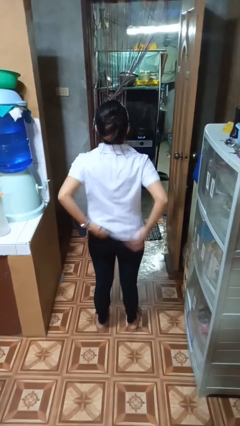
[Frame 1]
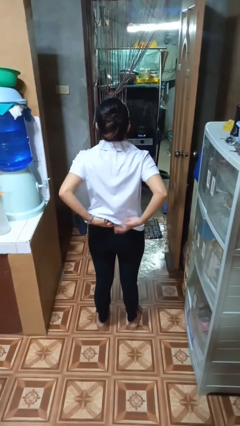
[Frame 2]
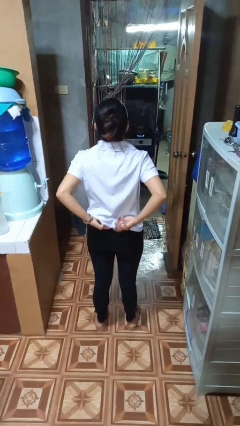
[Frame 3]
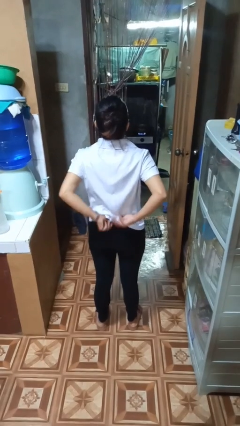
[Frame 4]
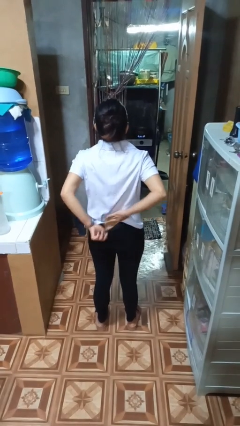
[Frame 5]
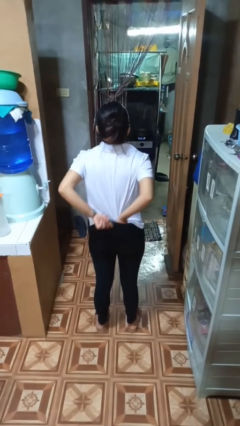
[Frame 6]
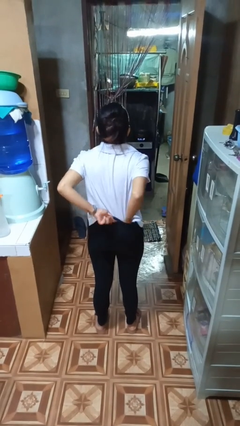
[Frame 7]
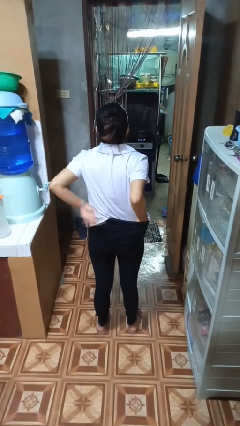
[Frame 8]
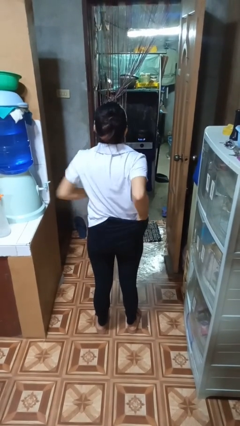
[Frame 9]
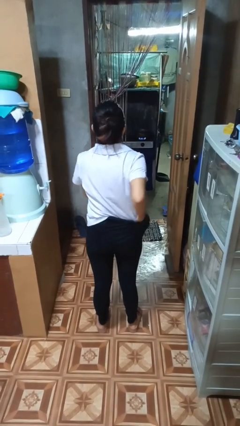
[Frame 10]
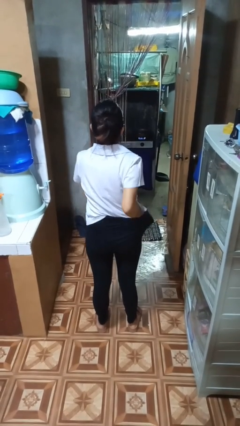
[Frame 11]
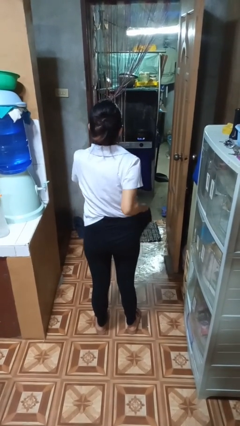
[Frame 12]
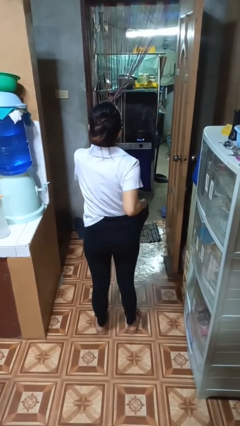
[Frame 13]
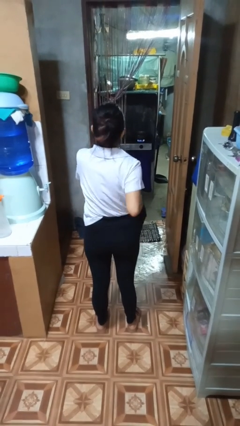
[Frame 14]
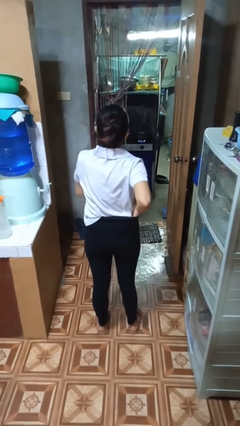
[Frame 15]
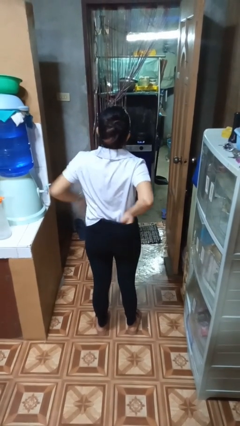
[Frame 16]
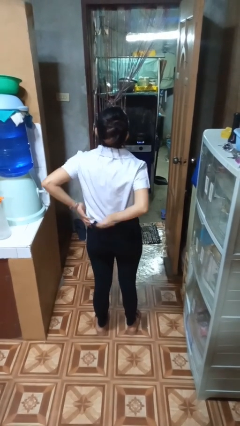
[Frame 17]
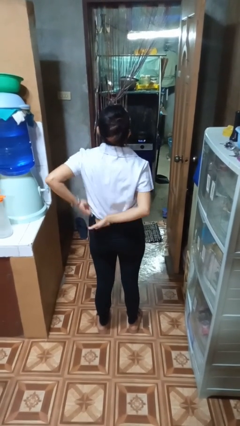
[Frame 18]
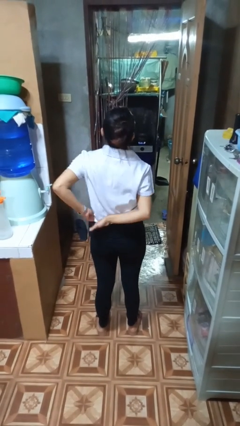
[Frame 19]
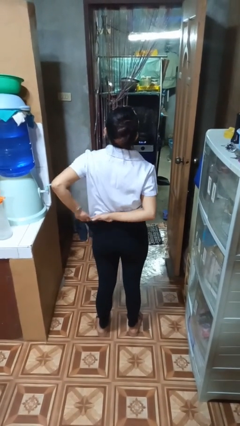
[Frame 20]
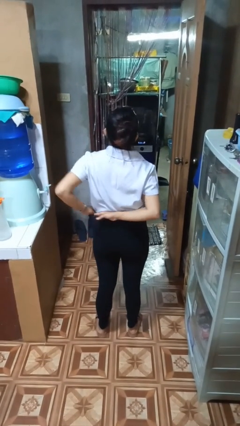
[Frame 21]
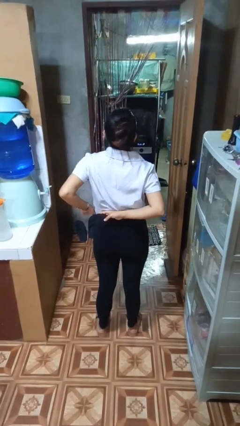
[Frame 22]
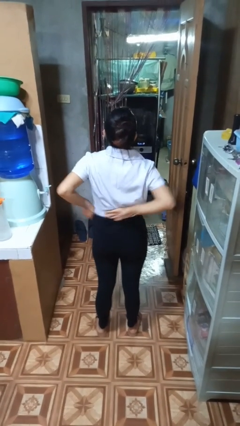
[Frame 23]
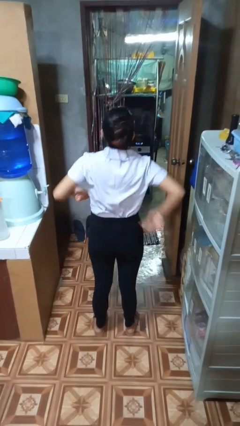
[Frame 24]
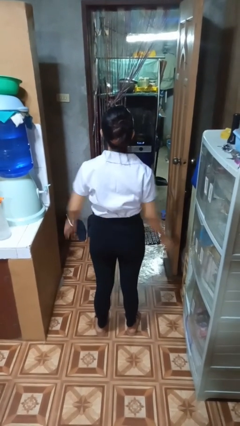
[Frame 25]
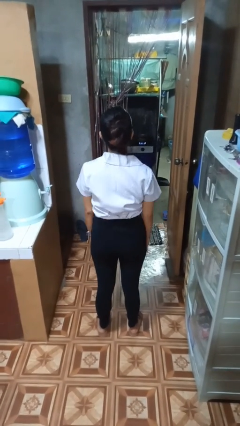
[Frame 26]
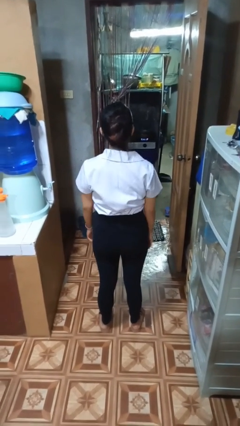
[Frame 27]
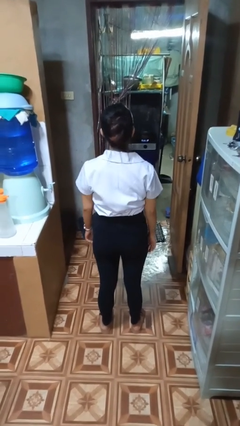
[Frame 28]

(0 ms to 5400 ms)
person tucks in shirt

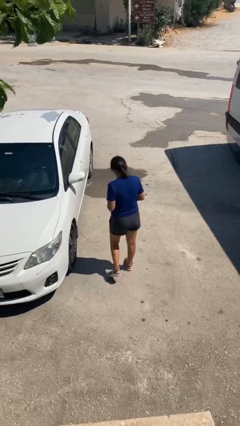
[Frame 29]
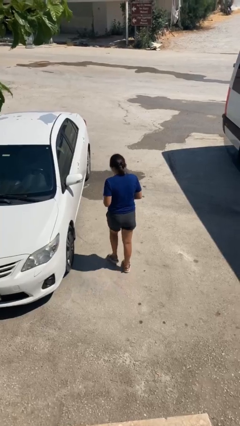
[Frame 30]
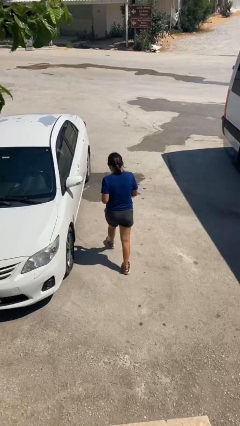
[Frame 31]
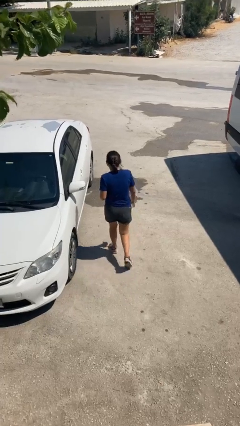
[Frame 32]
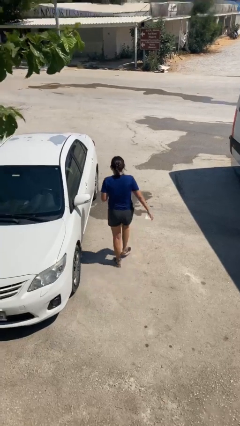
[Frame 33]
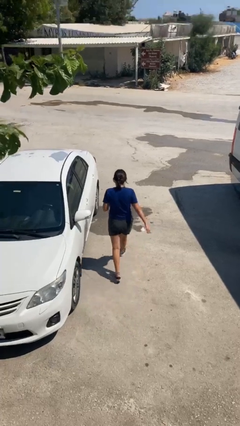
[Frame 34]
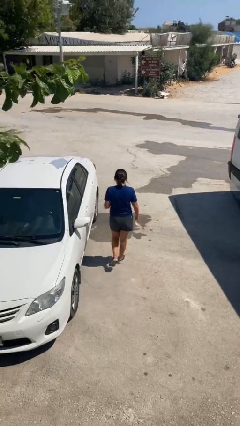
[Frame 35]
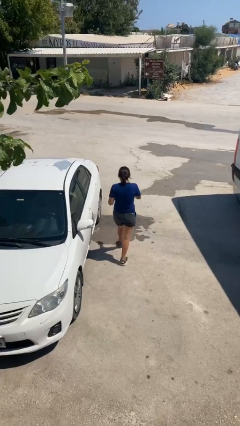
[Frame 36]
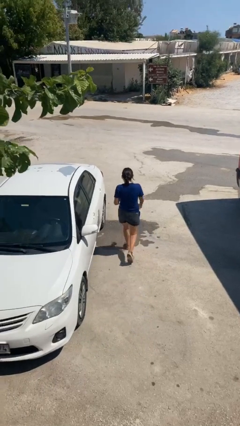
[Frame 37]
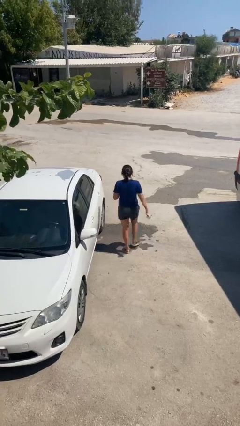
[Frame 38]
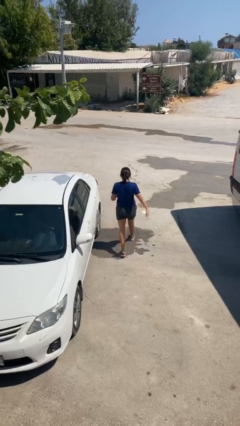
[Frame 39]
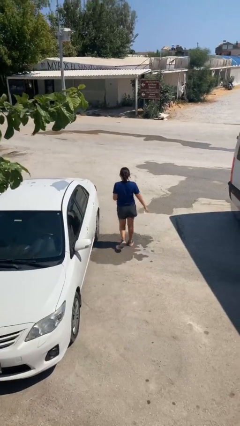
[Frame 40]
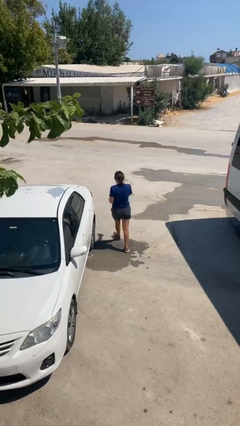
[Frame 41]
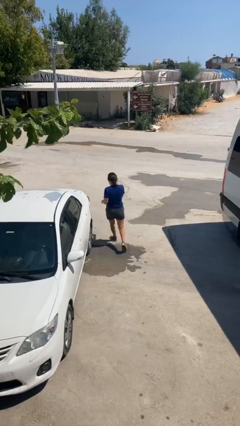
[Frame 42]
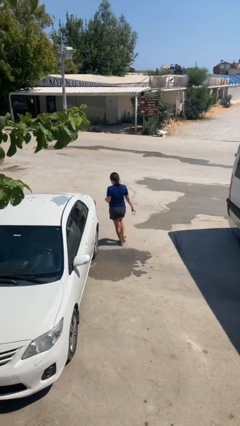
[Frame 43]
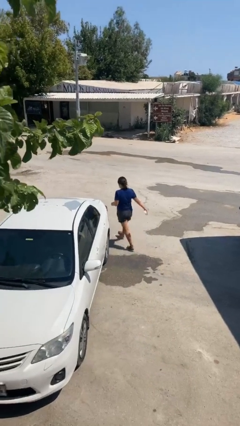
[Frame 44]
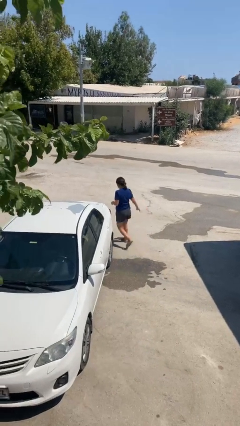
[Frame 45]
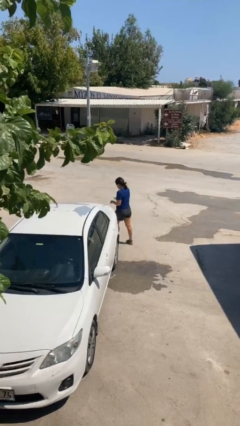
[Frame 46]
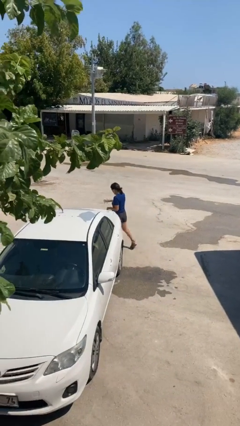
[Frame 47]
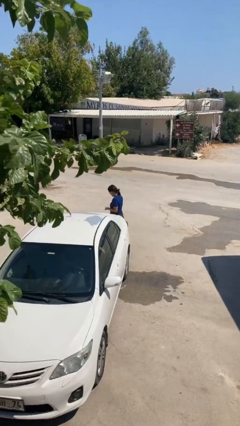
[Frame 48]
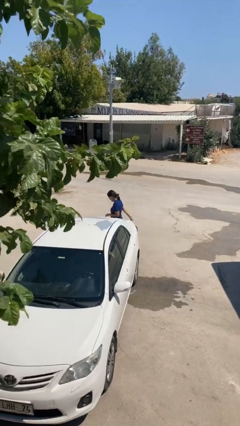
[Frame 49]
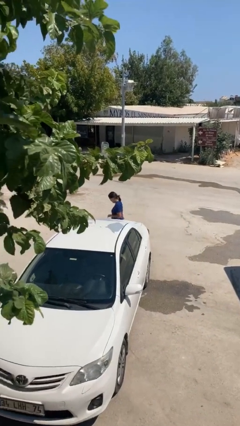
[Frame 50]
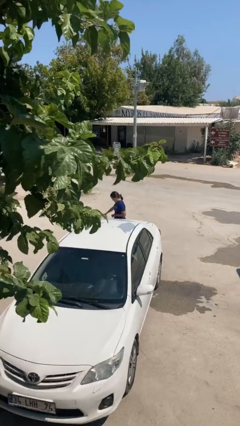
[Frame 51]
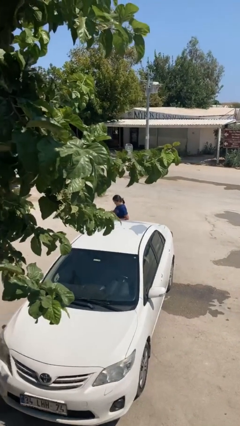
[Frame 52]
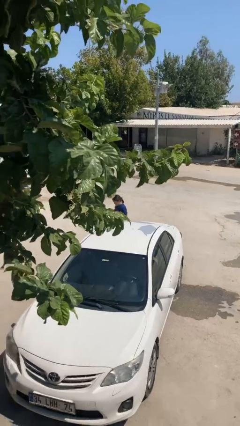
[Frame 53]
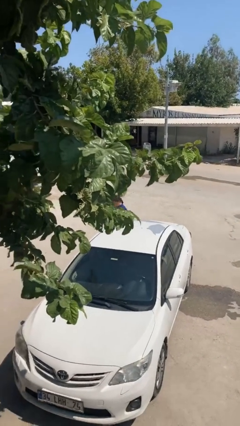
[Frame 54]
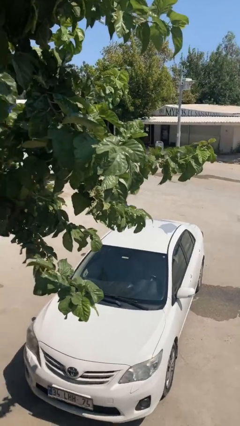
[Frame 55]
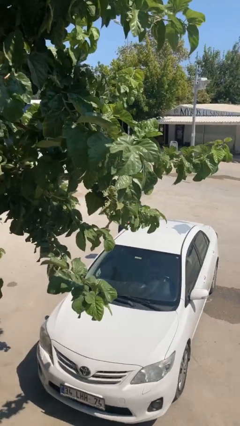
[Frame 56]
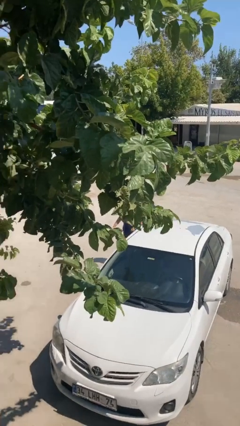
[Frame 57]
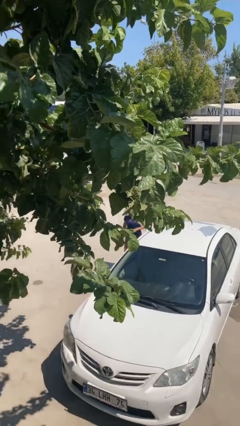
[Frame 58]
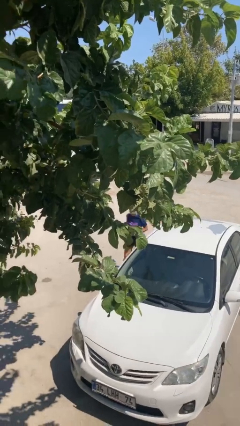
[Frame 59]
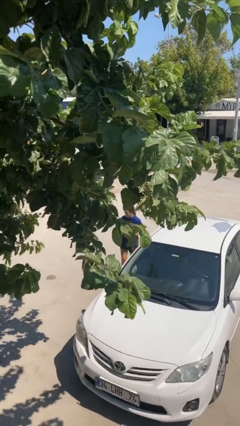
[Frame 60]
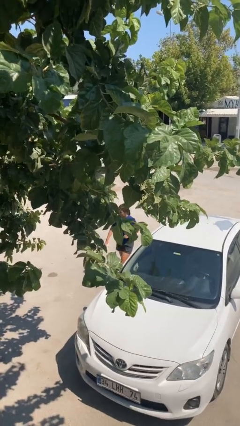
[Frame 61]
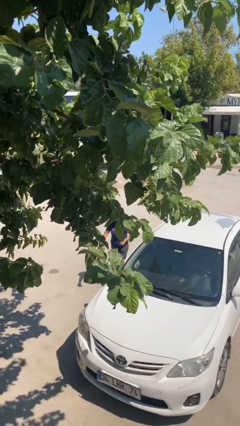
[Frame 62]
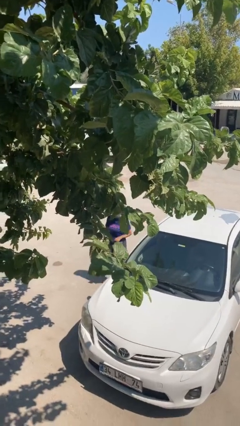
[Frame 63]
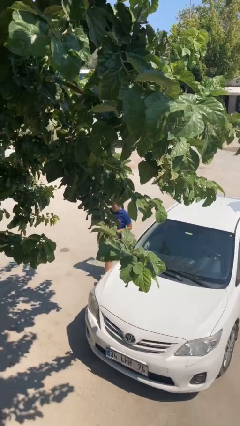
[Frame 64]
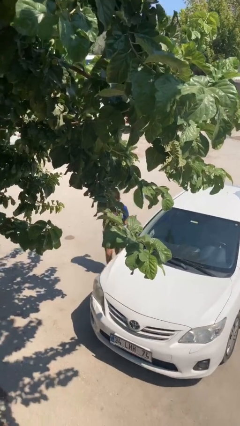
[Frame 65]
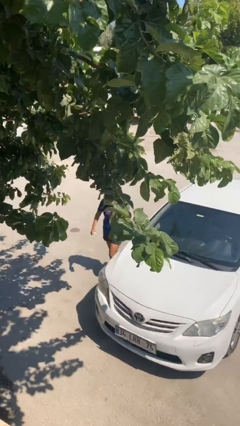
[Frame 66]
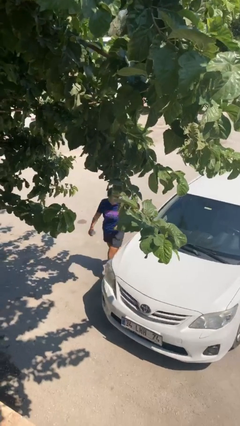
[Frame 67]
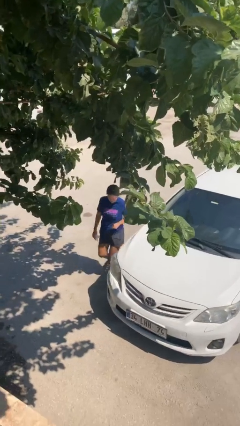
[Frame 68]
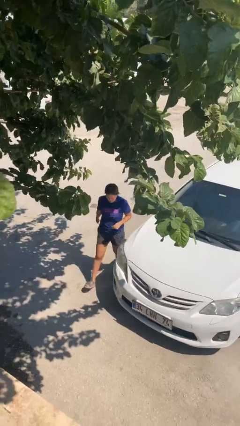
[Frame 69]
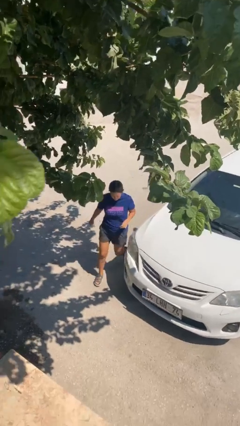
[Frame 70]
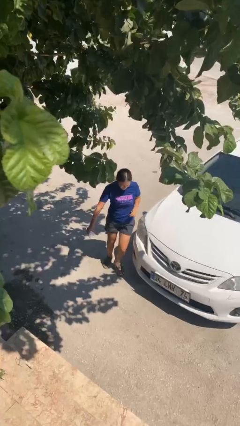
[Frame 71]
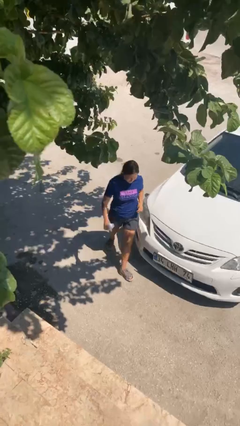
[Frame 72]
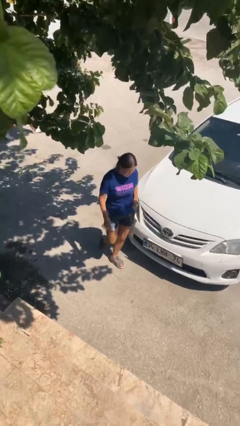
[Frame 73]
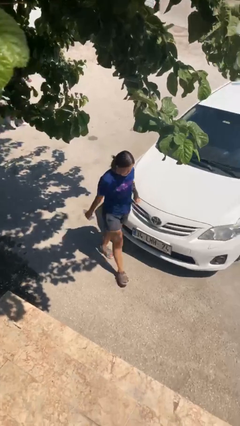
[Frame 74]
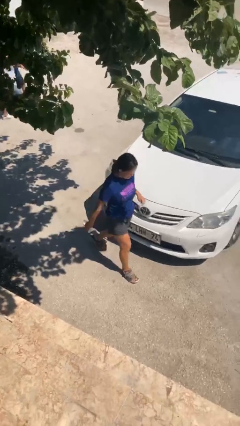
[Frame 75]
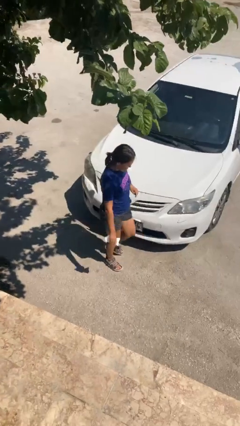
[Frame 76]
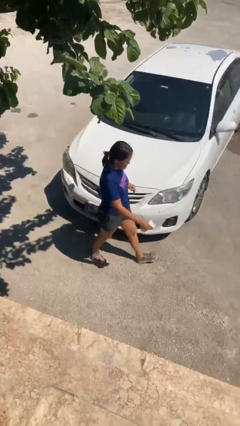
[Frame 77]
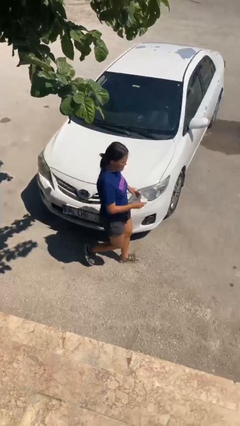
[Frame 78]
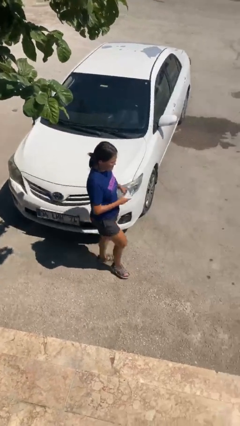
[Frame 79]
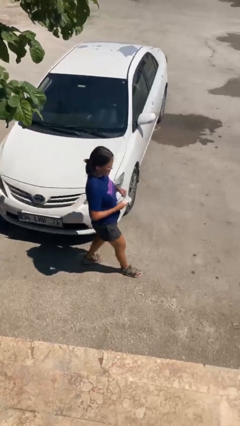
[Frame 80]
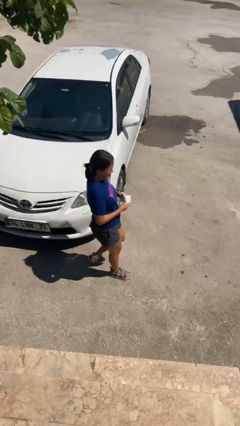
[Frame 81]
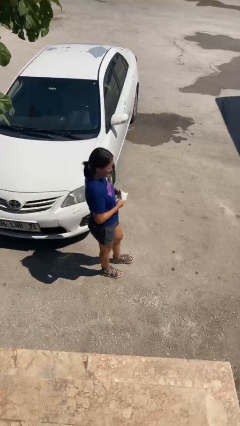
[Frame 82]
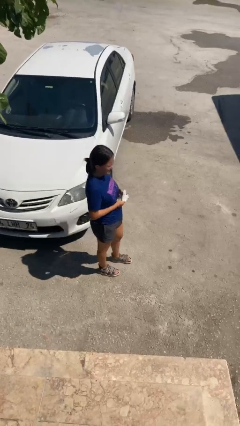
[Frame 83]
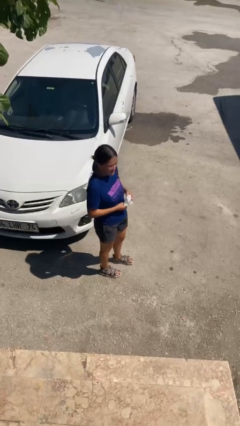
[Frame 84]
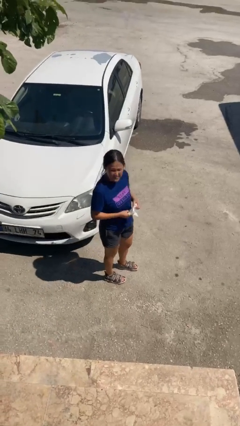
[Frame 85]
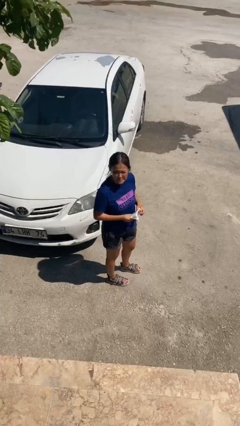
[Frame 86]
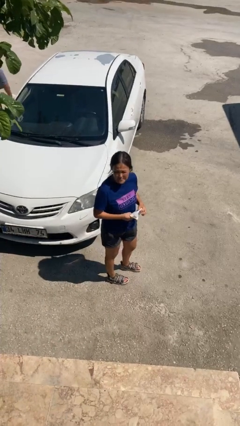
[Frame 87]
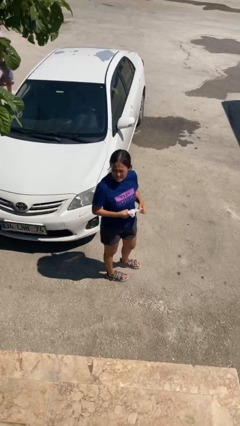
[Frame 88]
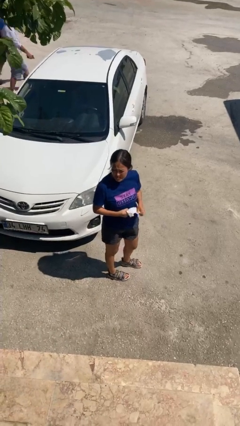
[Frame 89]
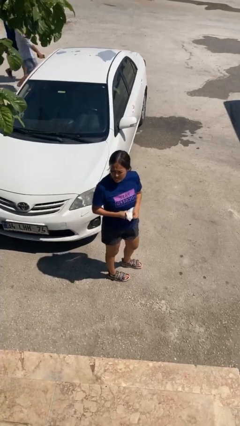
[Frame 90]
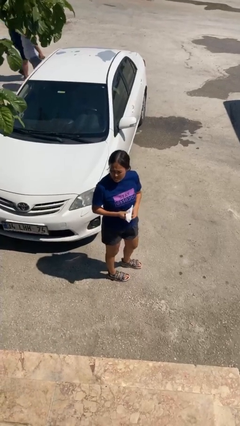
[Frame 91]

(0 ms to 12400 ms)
person walks around car

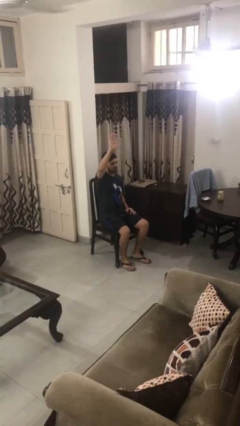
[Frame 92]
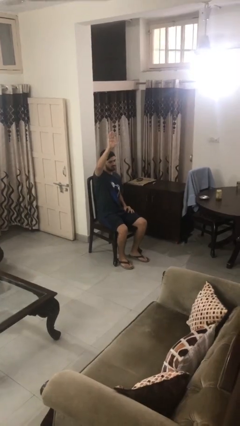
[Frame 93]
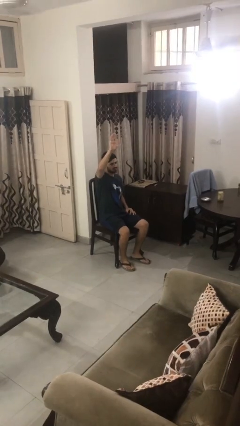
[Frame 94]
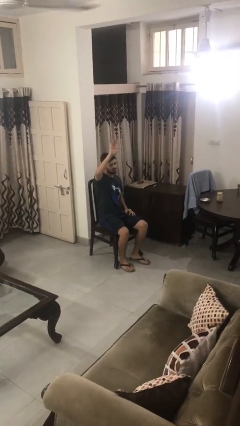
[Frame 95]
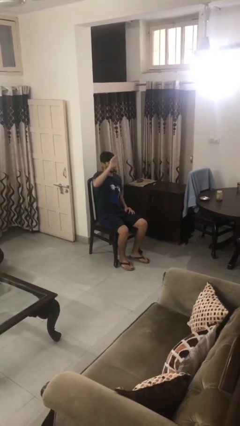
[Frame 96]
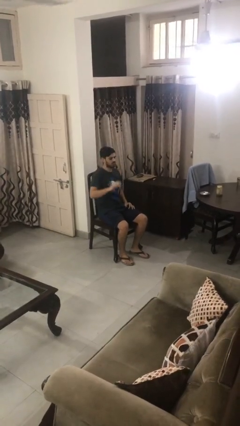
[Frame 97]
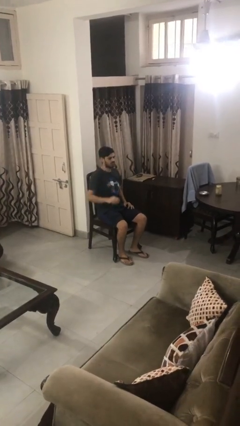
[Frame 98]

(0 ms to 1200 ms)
person gestures lower hand
